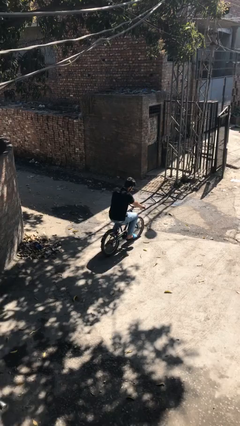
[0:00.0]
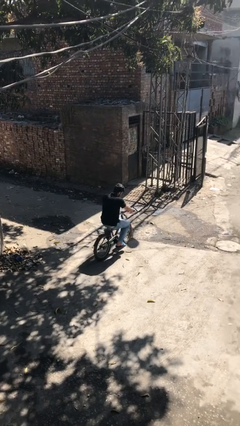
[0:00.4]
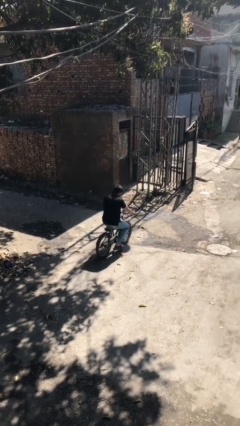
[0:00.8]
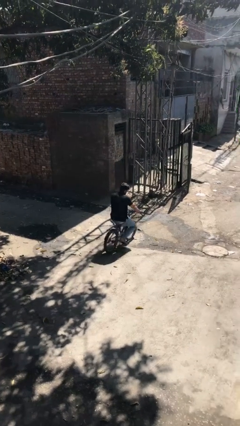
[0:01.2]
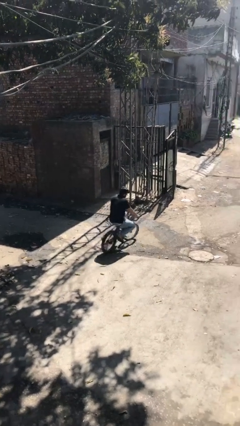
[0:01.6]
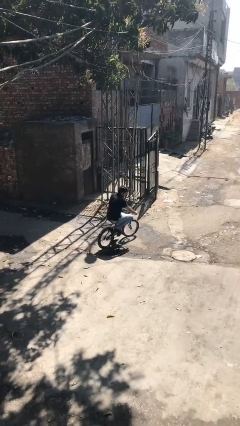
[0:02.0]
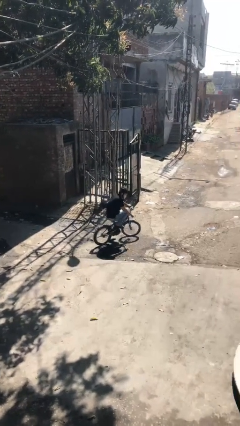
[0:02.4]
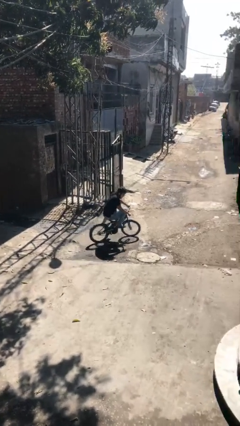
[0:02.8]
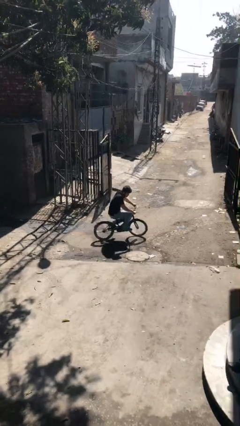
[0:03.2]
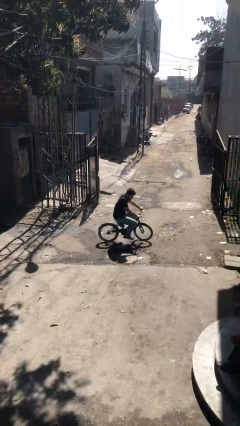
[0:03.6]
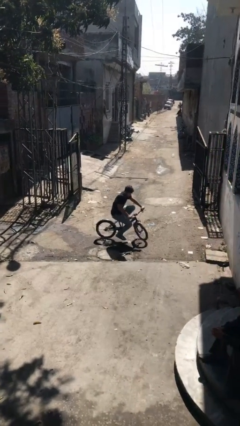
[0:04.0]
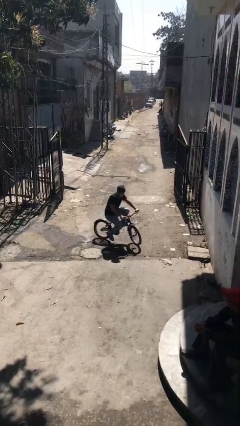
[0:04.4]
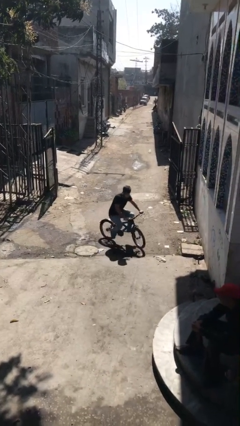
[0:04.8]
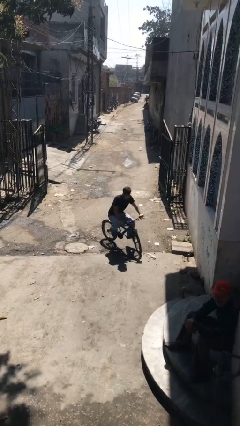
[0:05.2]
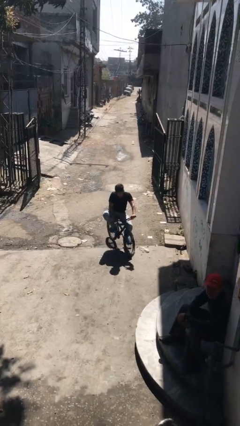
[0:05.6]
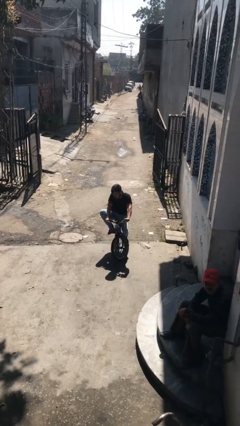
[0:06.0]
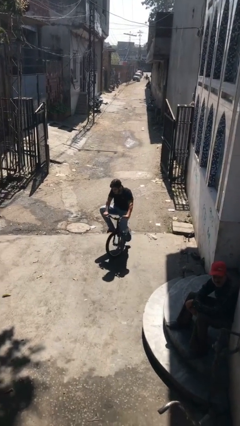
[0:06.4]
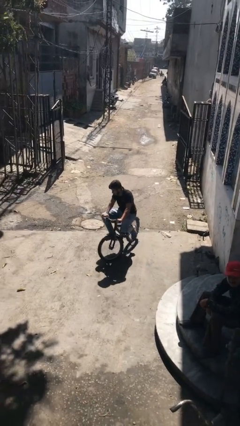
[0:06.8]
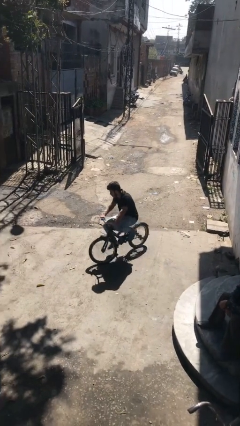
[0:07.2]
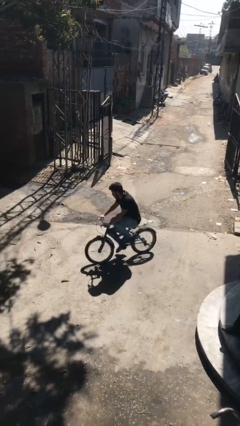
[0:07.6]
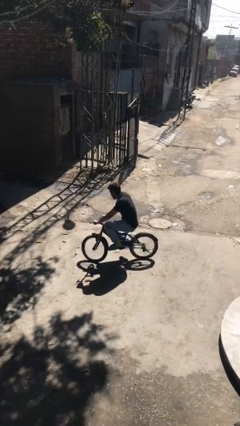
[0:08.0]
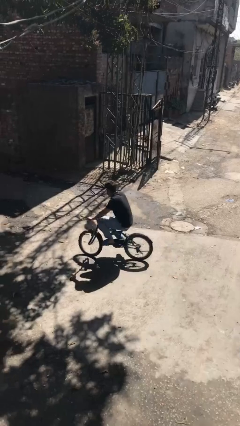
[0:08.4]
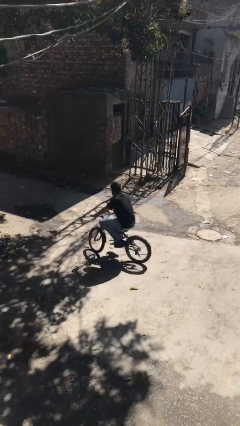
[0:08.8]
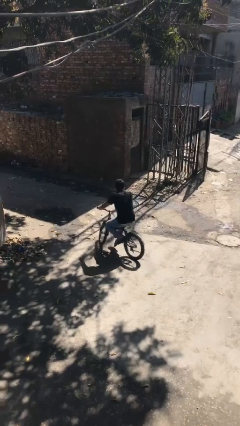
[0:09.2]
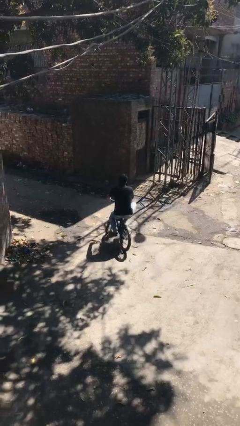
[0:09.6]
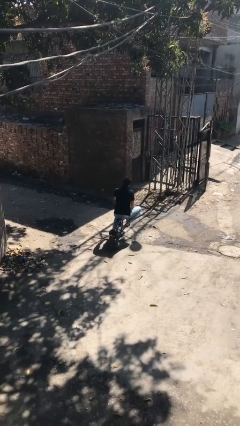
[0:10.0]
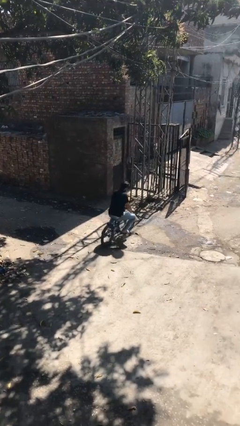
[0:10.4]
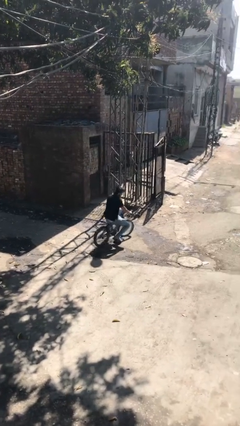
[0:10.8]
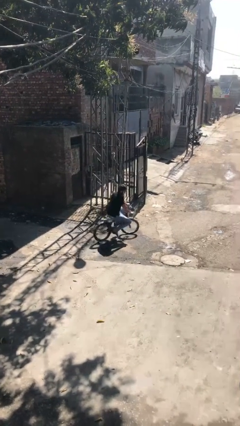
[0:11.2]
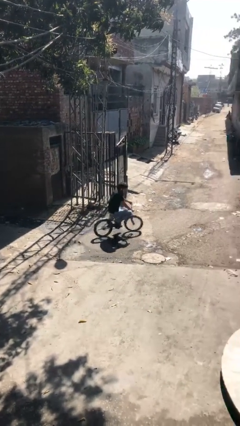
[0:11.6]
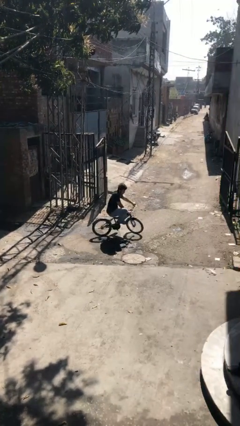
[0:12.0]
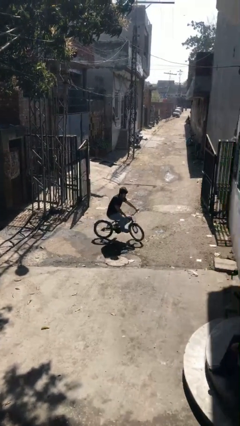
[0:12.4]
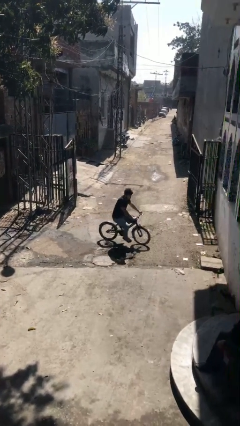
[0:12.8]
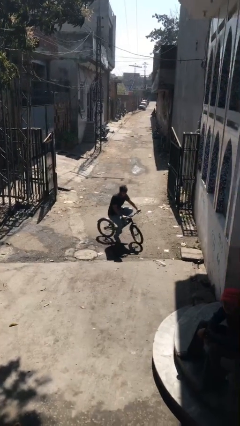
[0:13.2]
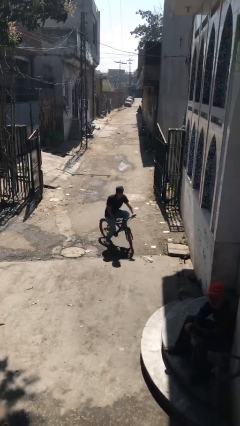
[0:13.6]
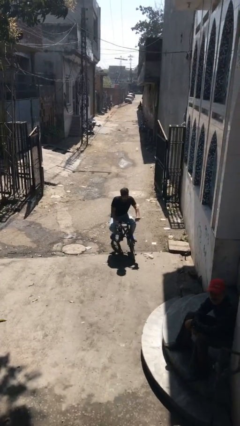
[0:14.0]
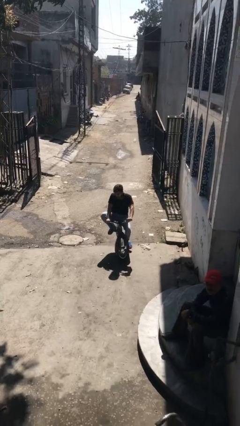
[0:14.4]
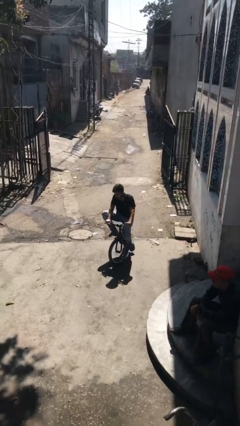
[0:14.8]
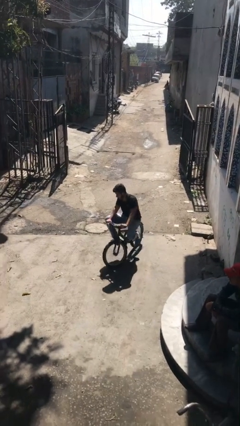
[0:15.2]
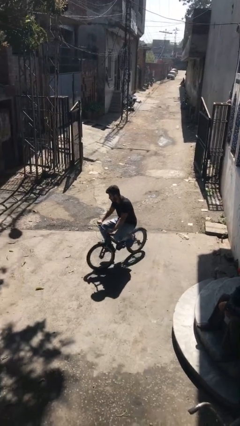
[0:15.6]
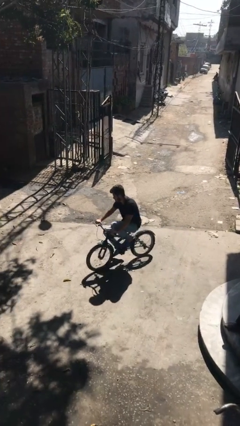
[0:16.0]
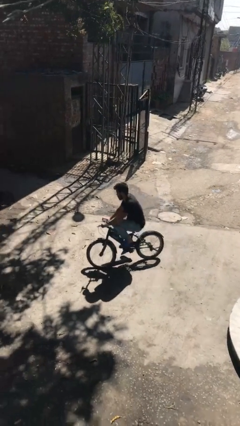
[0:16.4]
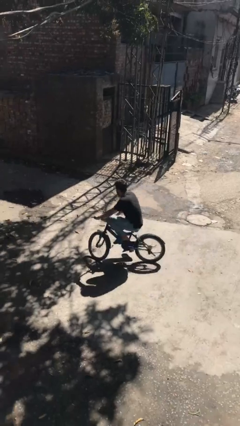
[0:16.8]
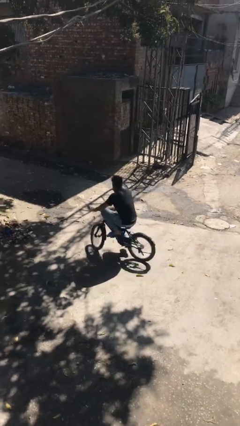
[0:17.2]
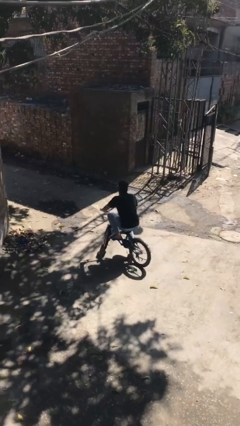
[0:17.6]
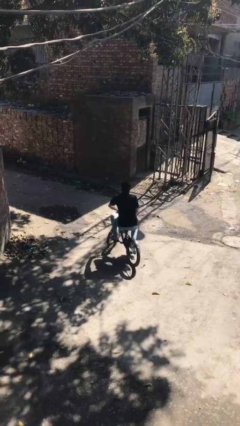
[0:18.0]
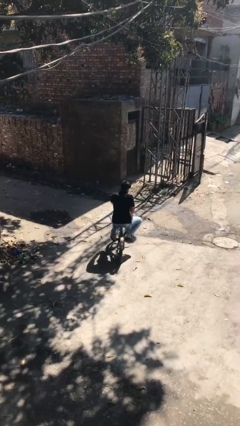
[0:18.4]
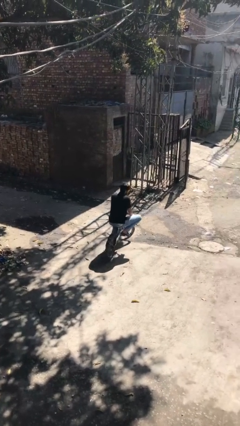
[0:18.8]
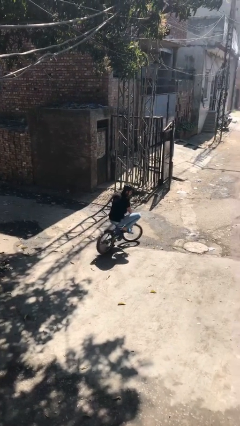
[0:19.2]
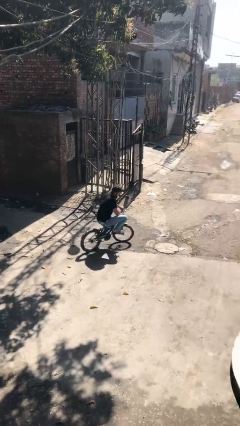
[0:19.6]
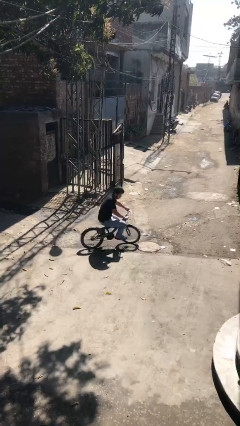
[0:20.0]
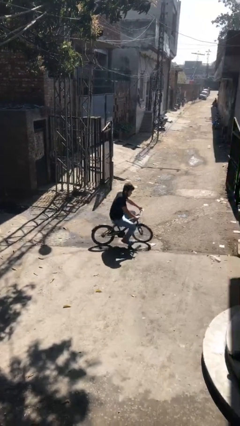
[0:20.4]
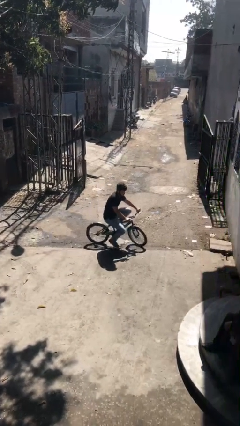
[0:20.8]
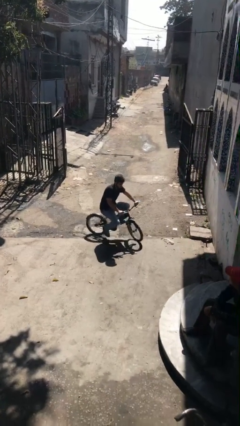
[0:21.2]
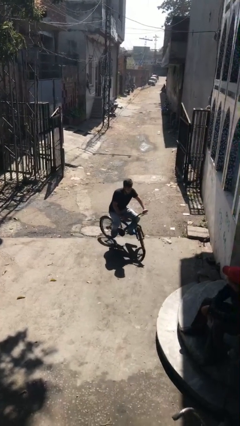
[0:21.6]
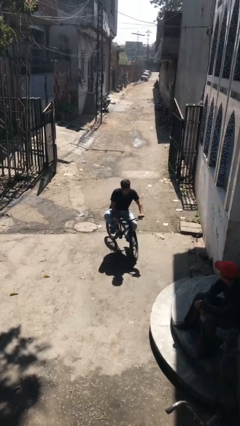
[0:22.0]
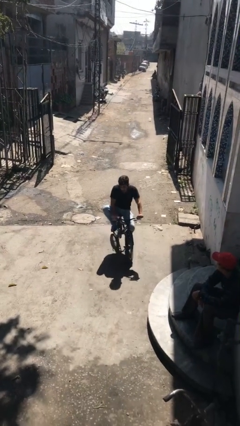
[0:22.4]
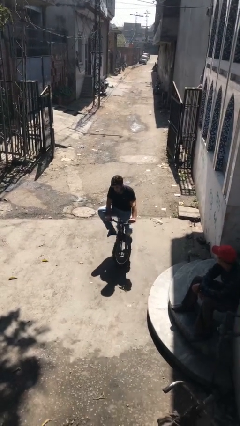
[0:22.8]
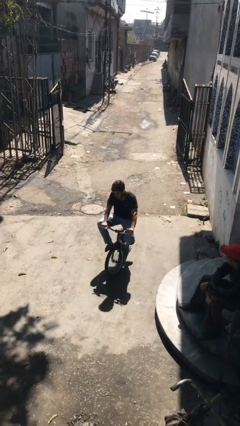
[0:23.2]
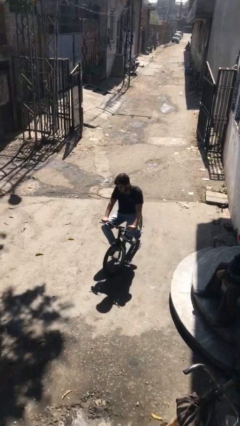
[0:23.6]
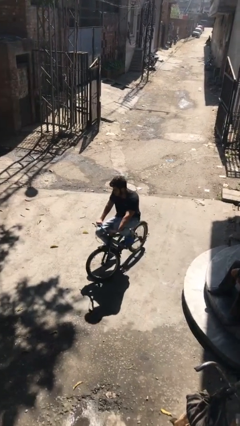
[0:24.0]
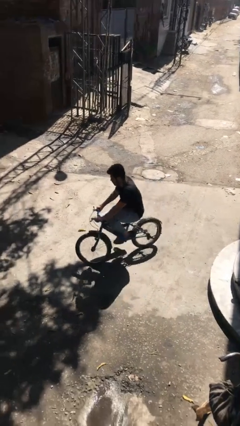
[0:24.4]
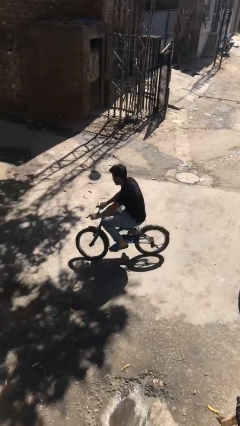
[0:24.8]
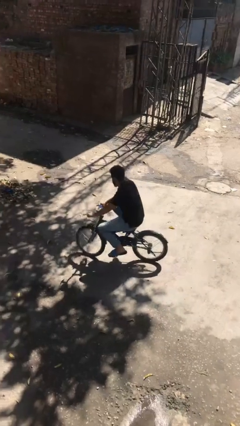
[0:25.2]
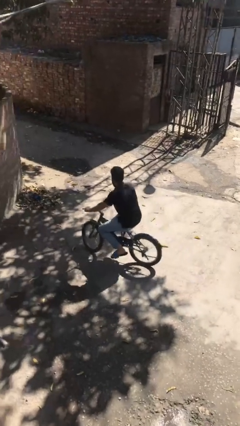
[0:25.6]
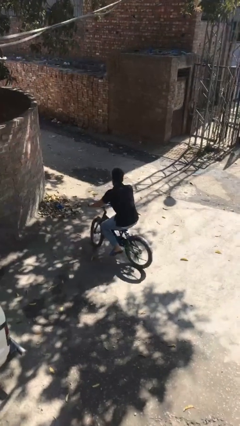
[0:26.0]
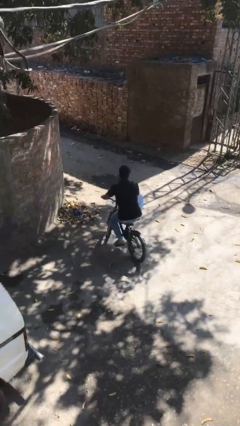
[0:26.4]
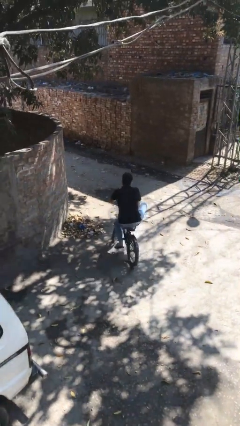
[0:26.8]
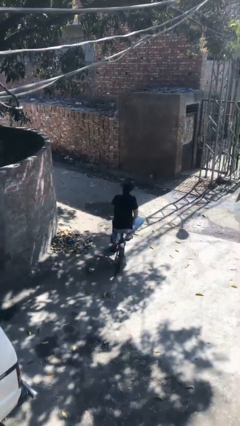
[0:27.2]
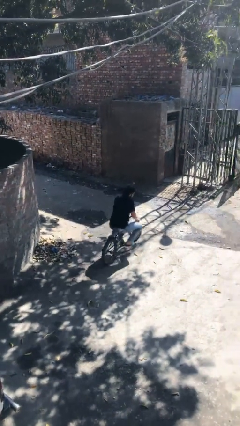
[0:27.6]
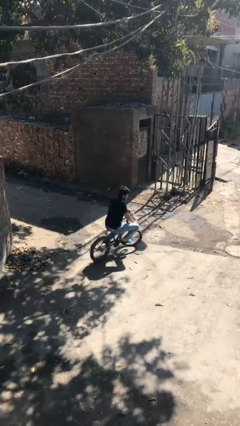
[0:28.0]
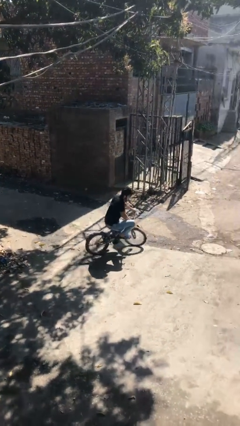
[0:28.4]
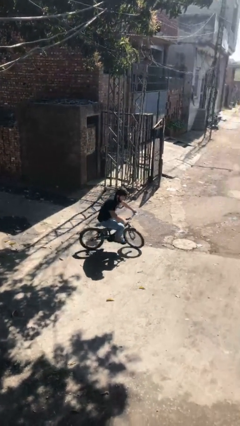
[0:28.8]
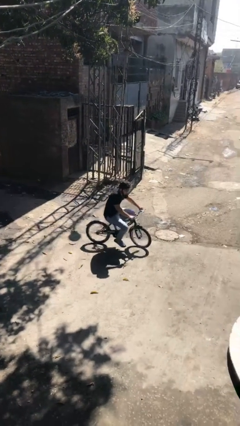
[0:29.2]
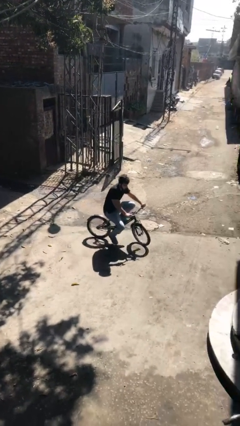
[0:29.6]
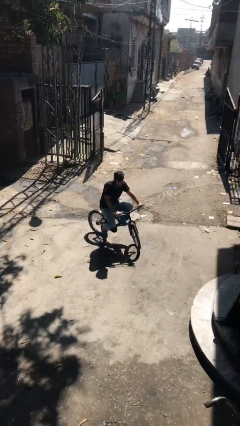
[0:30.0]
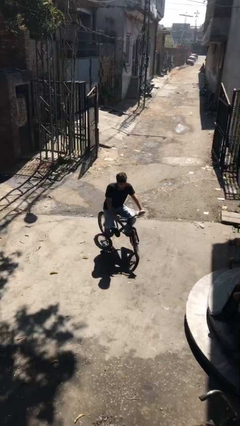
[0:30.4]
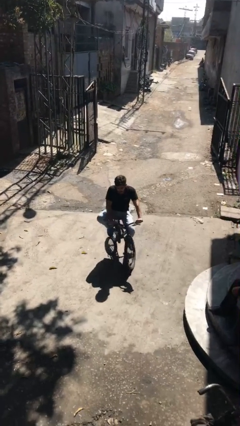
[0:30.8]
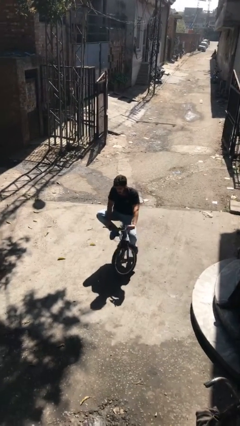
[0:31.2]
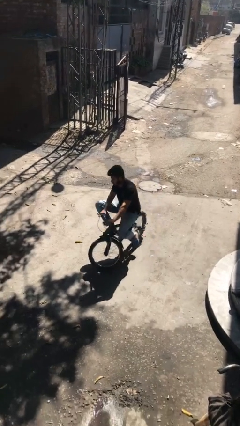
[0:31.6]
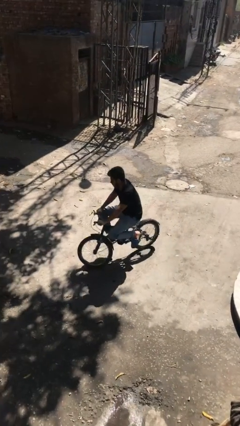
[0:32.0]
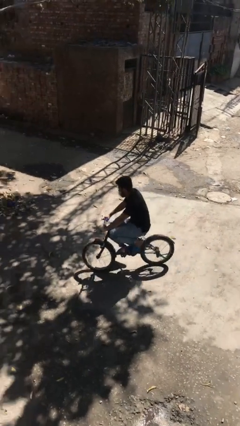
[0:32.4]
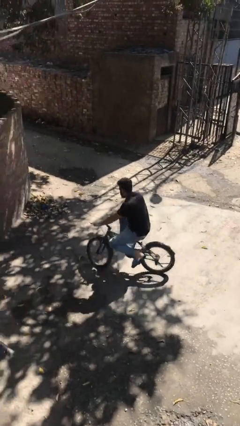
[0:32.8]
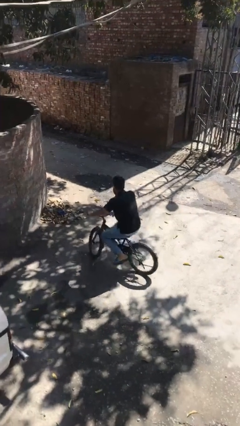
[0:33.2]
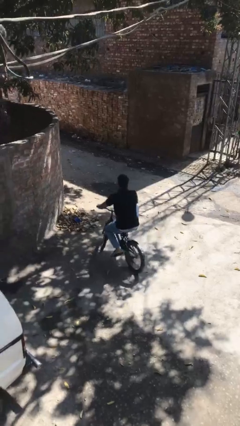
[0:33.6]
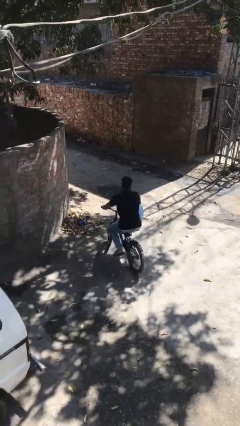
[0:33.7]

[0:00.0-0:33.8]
person rides bicycle

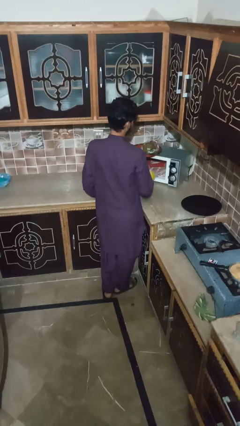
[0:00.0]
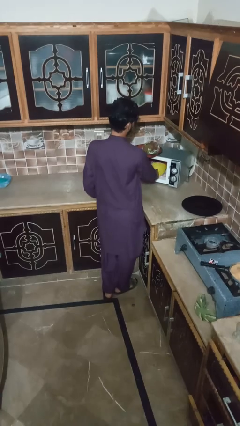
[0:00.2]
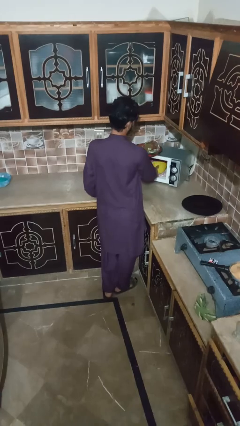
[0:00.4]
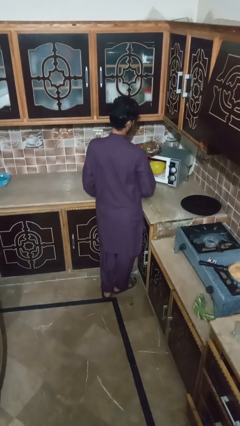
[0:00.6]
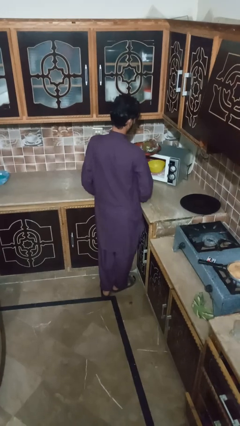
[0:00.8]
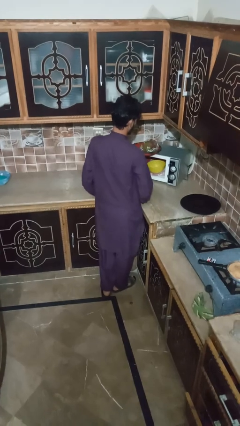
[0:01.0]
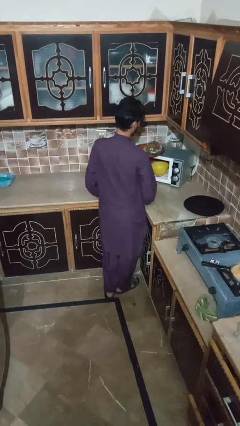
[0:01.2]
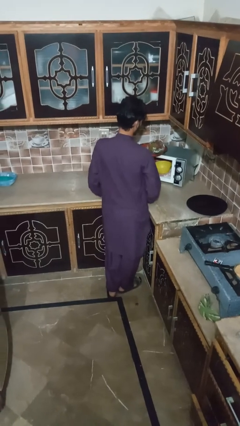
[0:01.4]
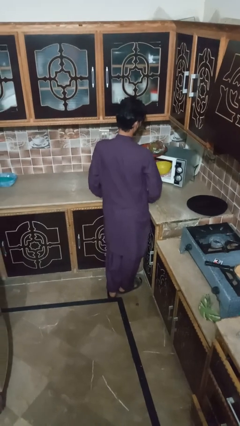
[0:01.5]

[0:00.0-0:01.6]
person puts object into microwave
